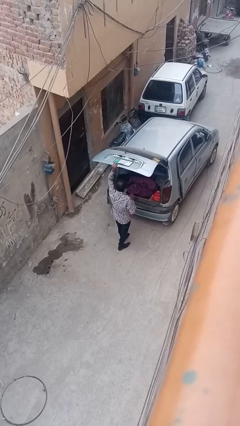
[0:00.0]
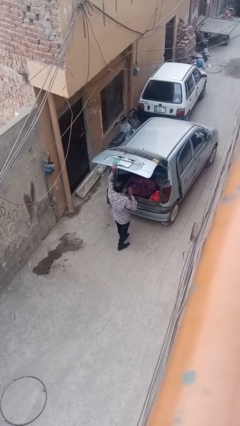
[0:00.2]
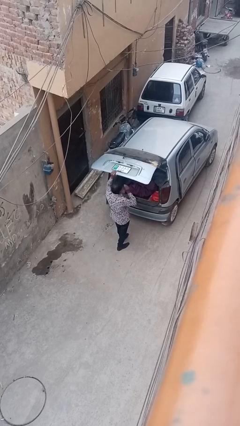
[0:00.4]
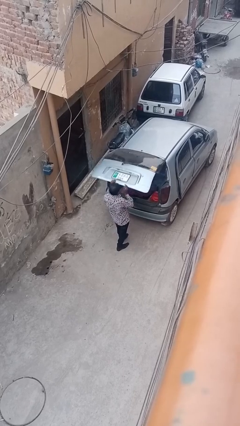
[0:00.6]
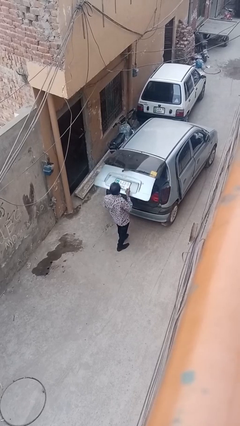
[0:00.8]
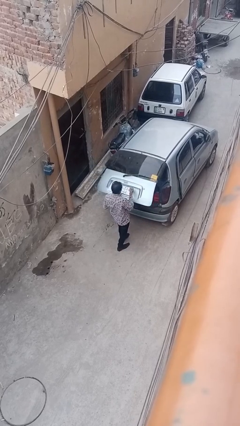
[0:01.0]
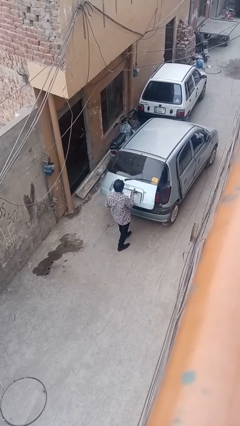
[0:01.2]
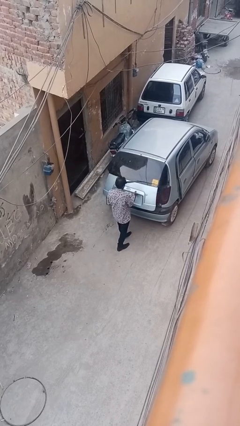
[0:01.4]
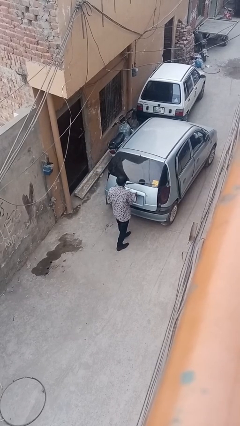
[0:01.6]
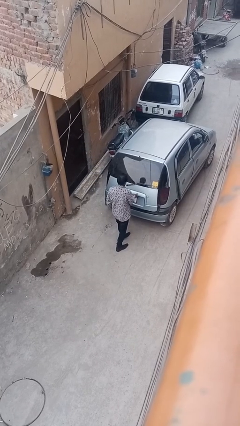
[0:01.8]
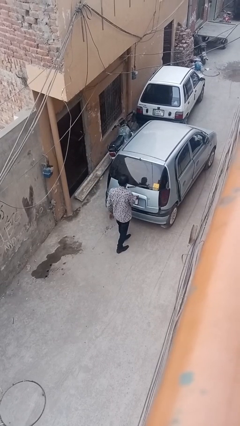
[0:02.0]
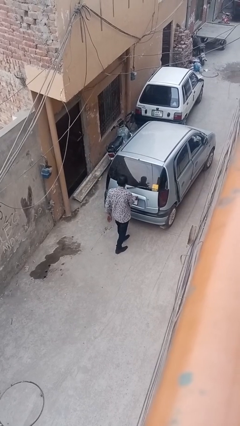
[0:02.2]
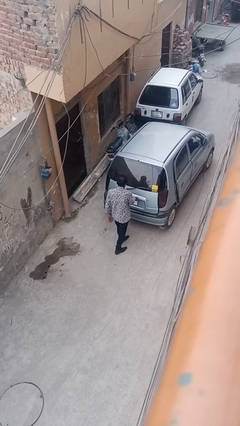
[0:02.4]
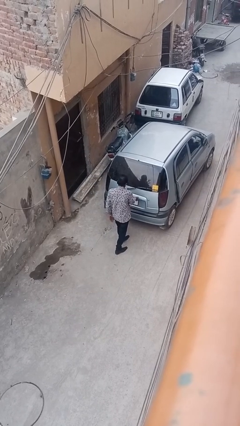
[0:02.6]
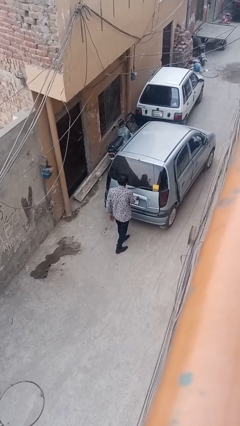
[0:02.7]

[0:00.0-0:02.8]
person closes car trunk

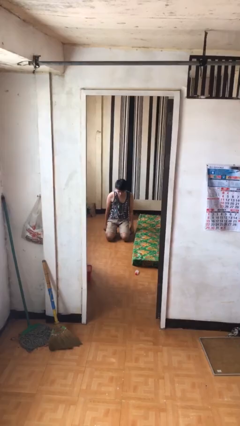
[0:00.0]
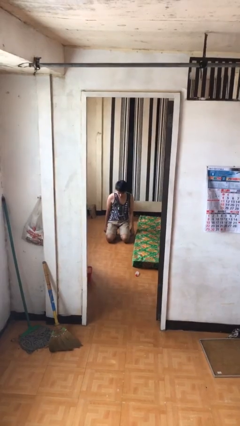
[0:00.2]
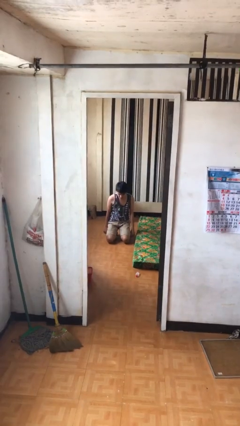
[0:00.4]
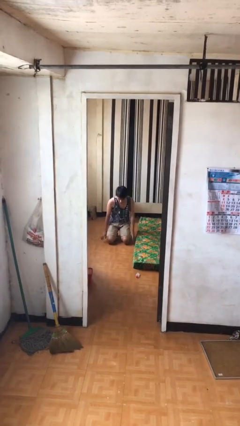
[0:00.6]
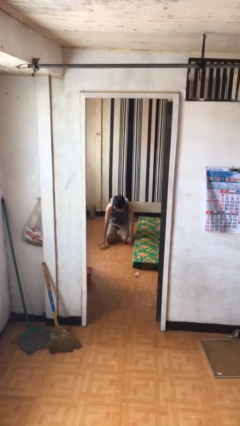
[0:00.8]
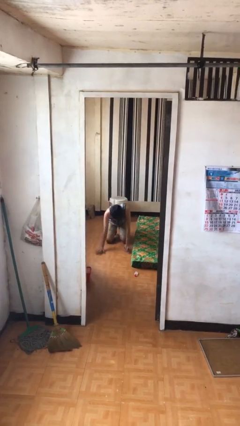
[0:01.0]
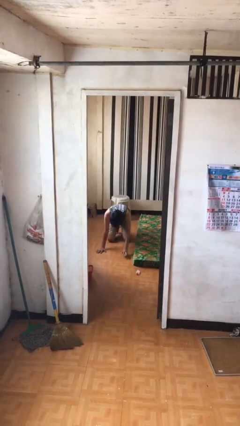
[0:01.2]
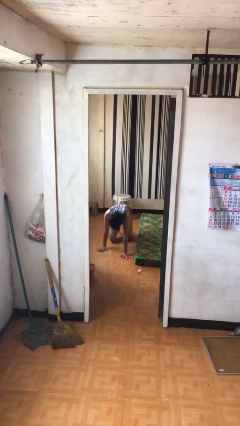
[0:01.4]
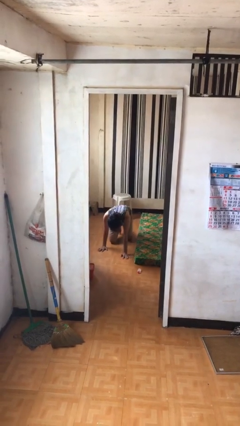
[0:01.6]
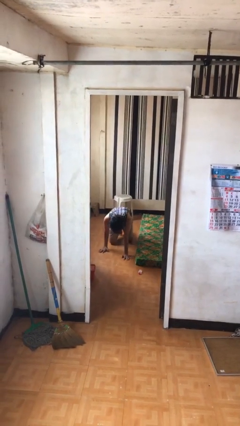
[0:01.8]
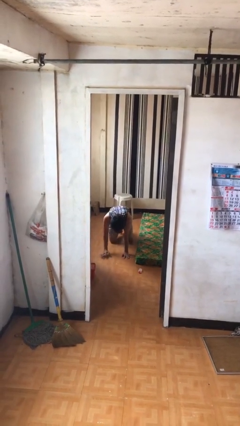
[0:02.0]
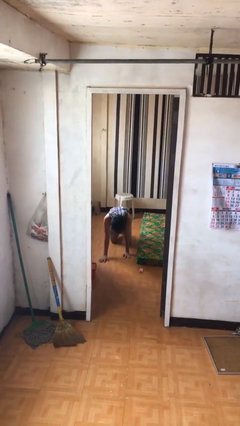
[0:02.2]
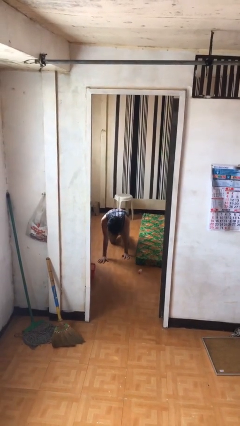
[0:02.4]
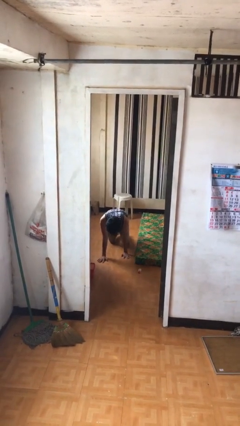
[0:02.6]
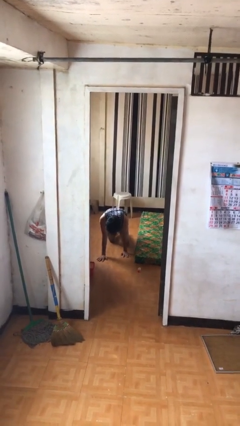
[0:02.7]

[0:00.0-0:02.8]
person crawls

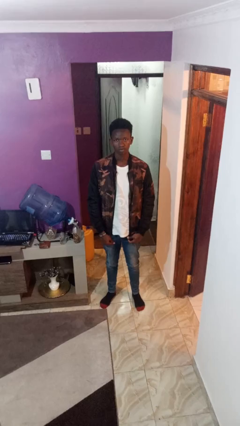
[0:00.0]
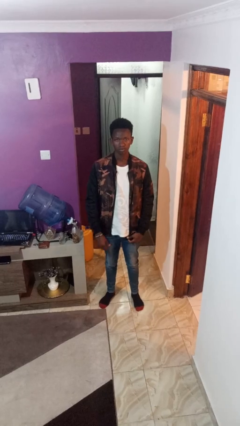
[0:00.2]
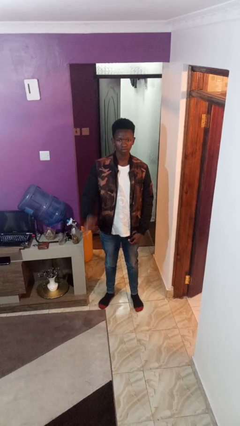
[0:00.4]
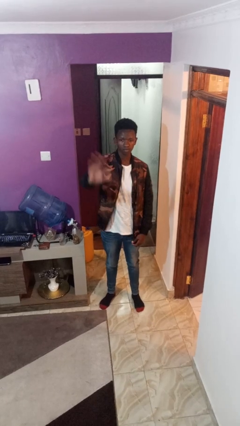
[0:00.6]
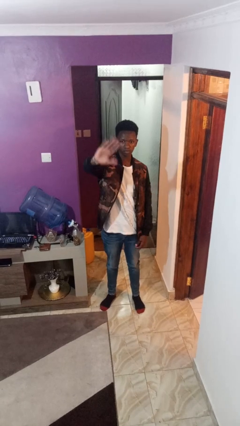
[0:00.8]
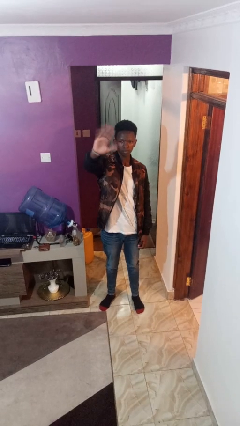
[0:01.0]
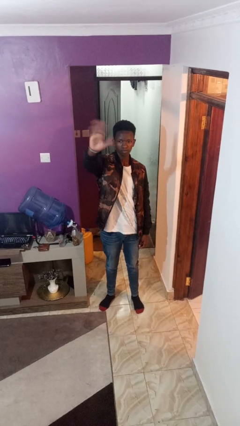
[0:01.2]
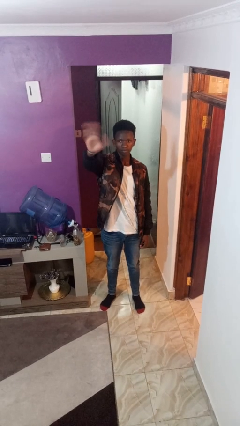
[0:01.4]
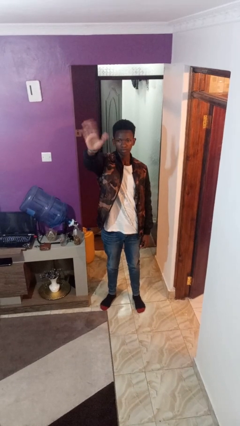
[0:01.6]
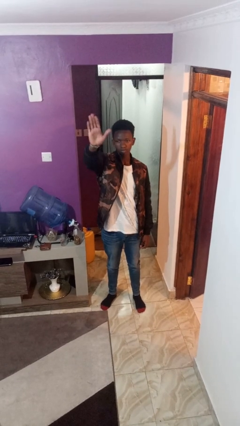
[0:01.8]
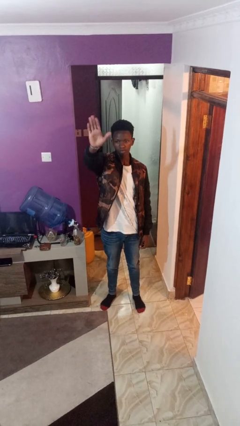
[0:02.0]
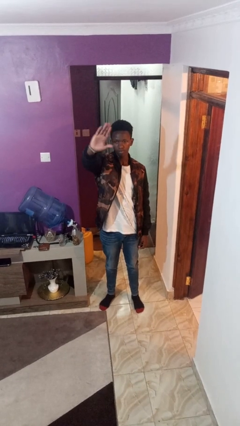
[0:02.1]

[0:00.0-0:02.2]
person waves at person

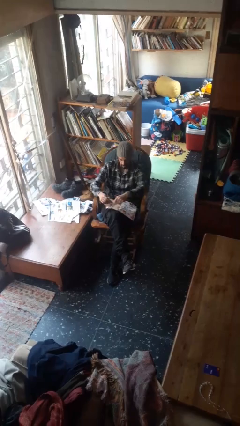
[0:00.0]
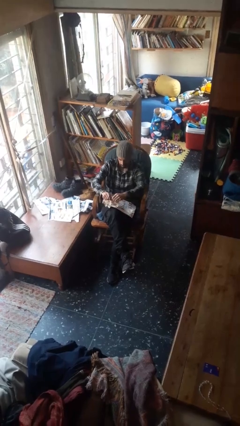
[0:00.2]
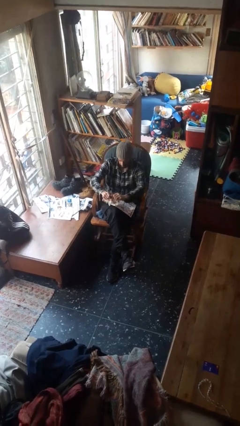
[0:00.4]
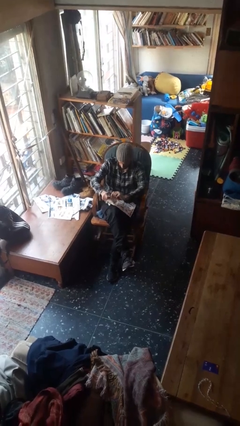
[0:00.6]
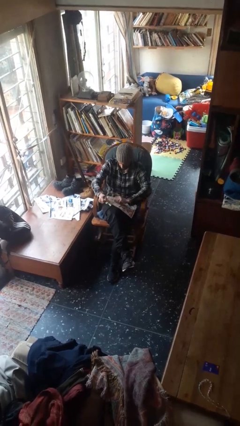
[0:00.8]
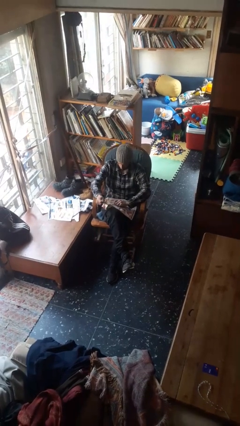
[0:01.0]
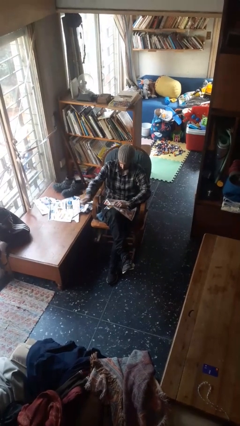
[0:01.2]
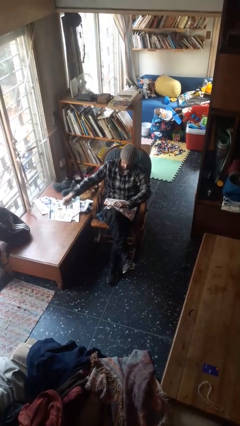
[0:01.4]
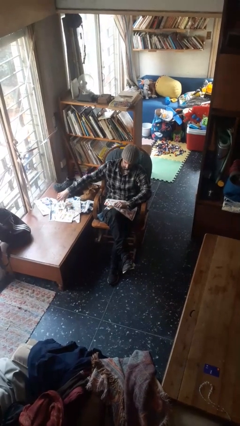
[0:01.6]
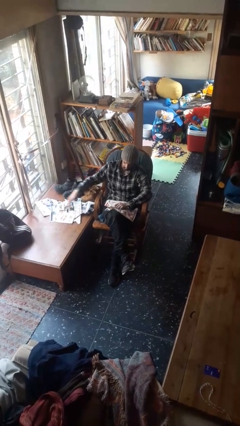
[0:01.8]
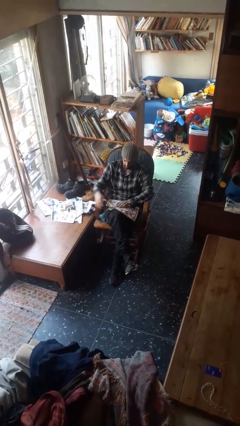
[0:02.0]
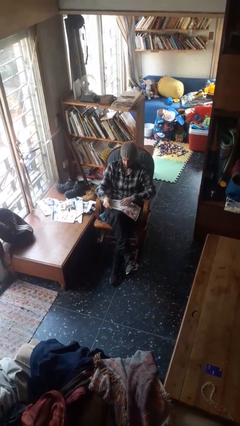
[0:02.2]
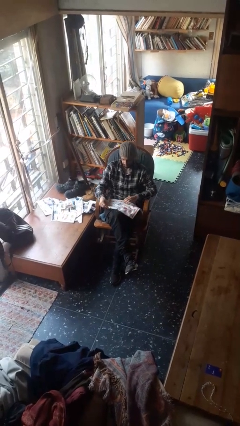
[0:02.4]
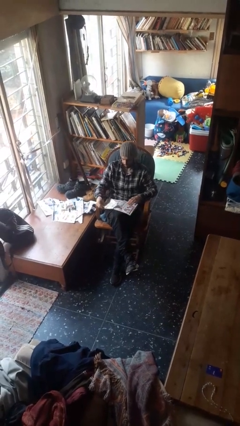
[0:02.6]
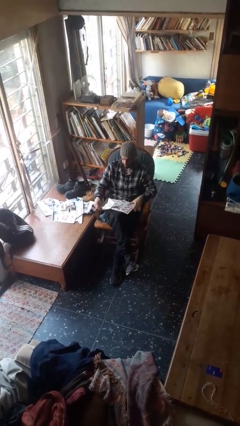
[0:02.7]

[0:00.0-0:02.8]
person tears paper

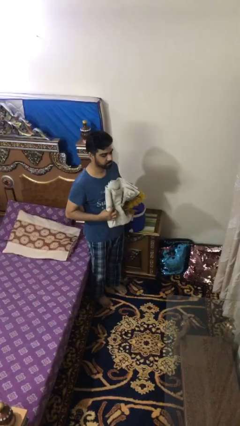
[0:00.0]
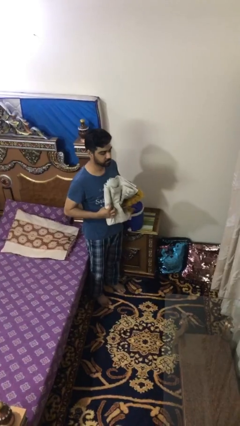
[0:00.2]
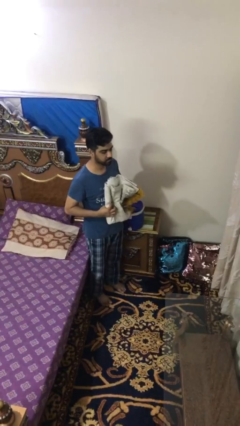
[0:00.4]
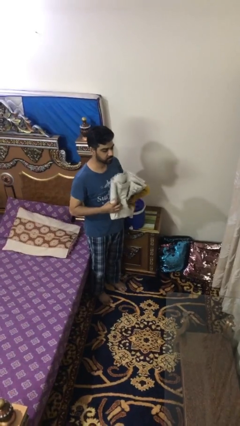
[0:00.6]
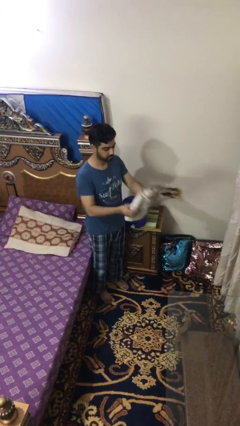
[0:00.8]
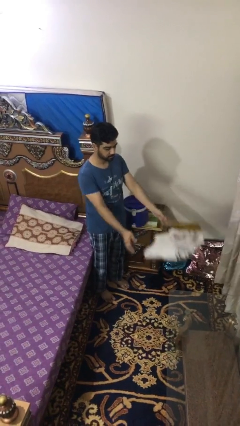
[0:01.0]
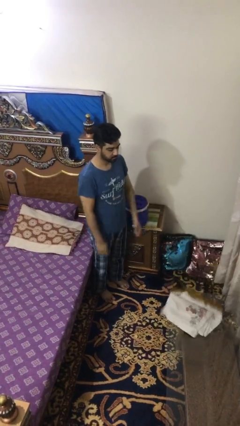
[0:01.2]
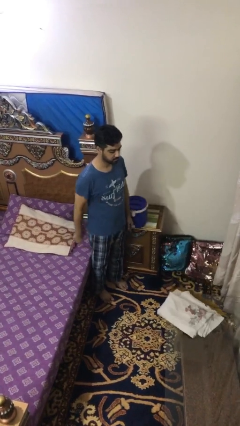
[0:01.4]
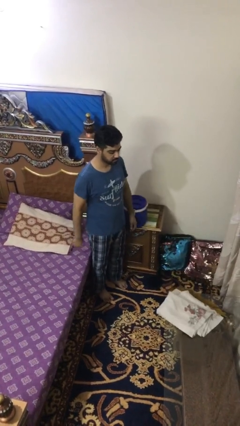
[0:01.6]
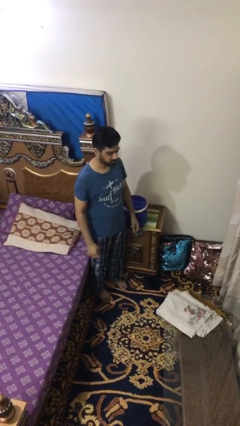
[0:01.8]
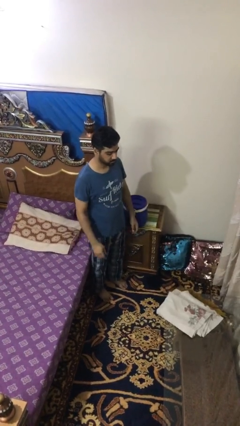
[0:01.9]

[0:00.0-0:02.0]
person throws object on table

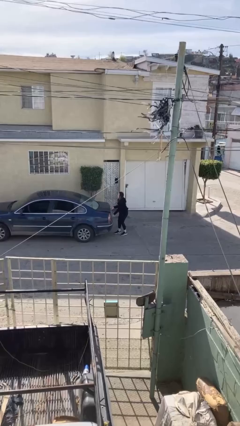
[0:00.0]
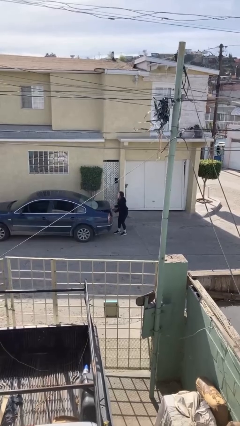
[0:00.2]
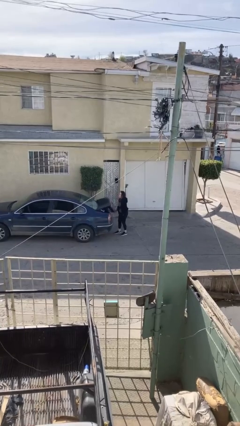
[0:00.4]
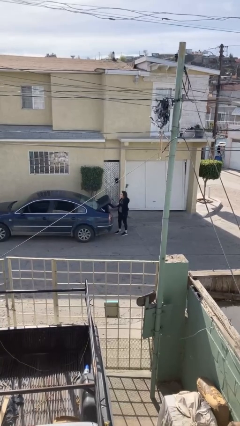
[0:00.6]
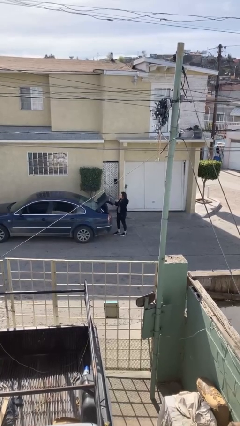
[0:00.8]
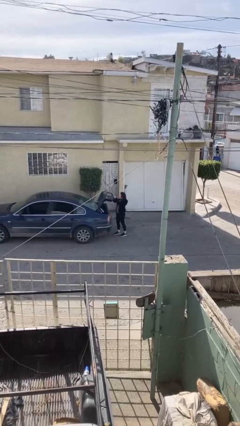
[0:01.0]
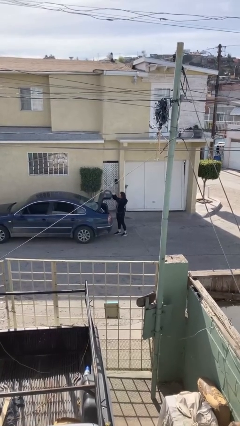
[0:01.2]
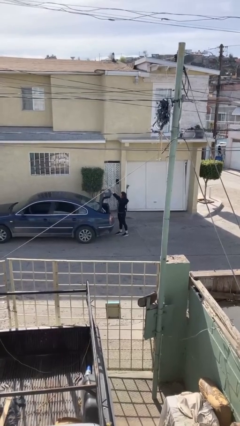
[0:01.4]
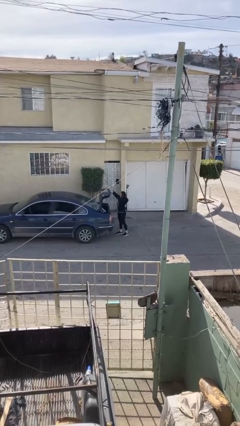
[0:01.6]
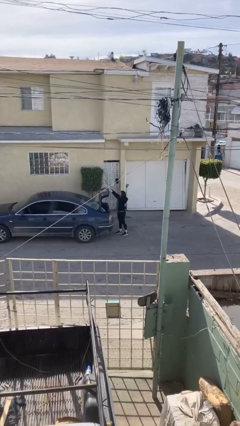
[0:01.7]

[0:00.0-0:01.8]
person opens car trunk

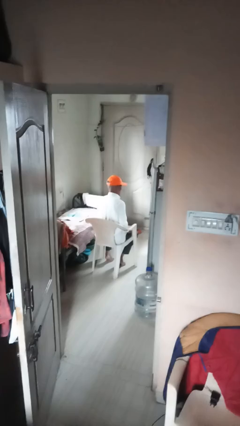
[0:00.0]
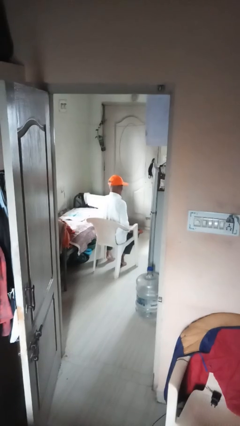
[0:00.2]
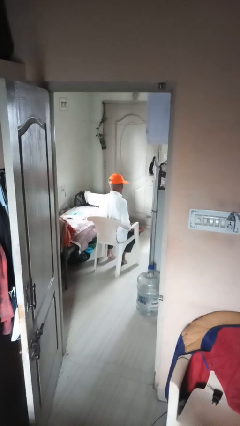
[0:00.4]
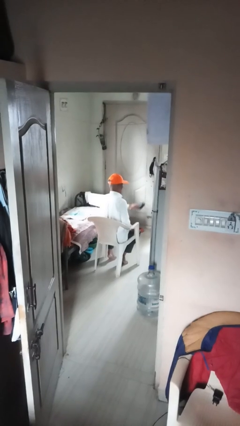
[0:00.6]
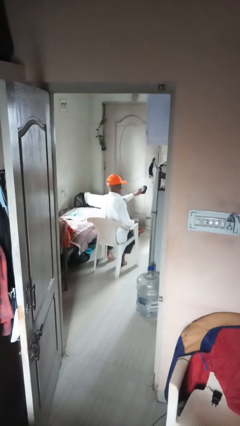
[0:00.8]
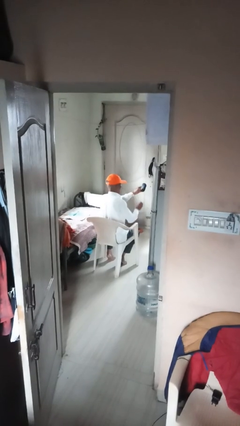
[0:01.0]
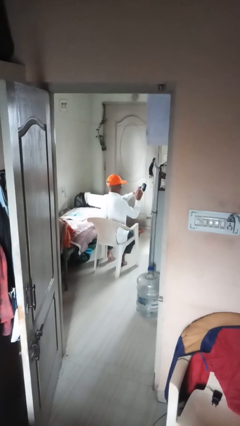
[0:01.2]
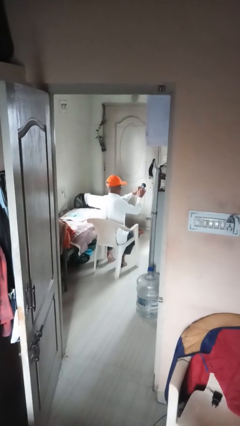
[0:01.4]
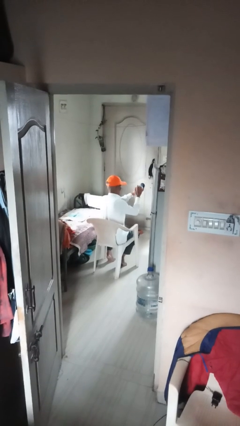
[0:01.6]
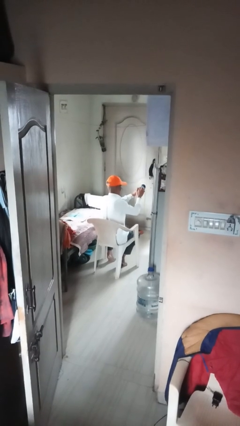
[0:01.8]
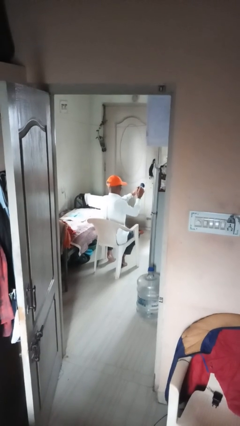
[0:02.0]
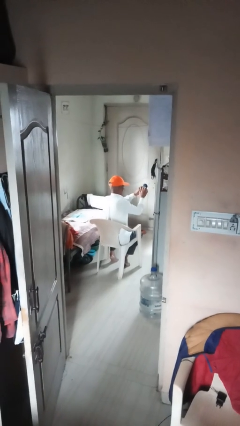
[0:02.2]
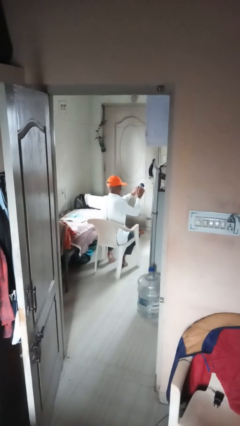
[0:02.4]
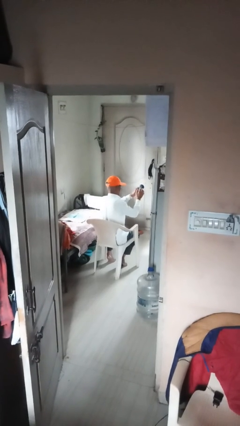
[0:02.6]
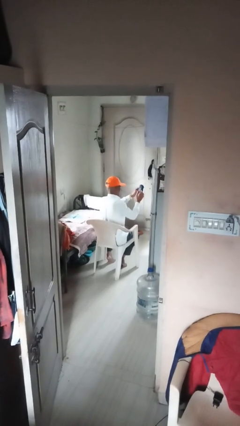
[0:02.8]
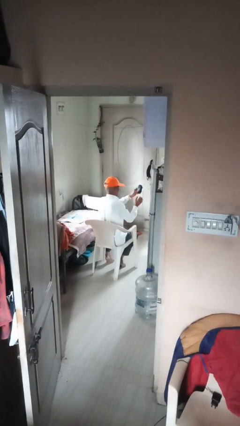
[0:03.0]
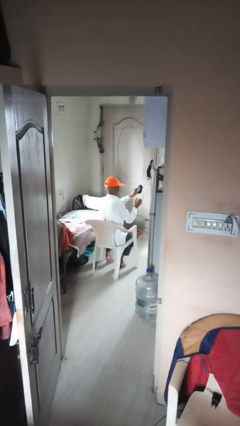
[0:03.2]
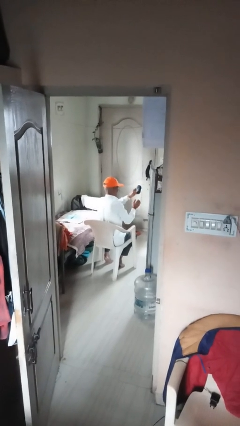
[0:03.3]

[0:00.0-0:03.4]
person taps object with finger
